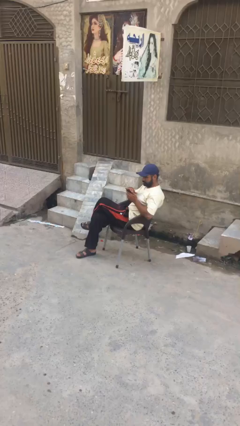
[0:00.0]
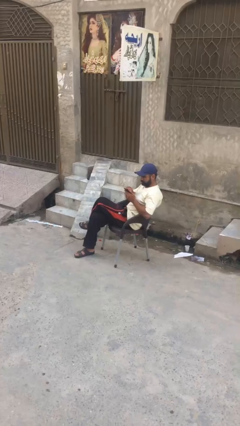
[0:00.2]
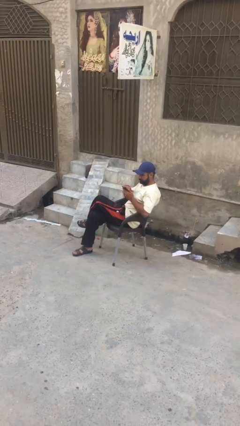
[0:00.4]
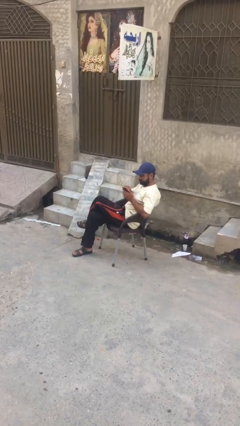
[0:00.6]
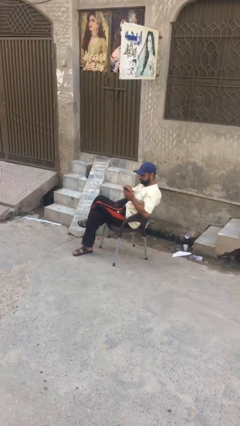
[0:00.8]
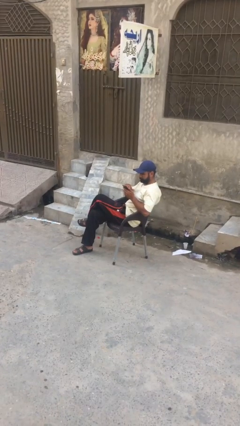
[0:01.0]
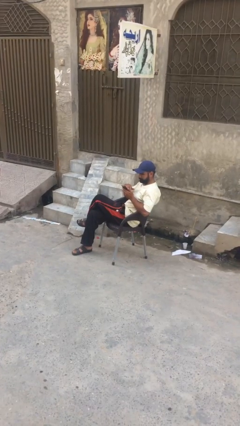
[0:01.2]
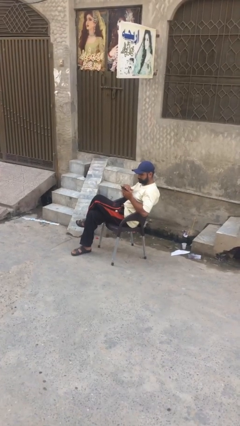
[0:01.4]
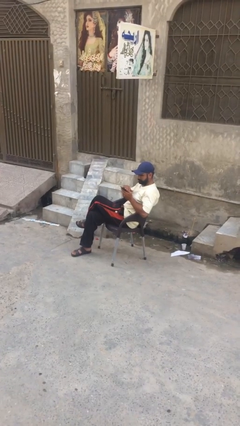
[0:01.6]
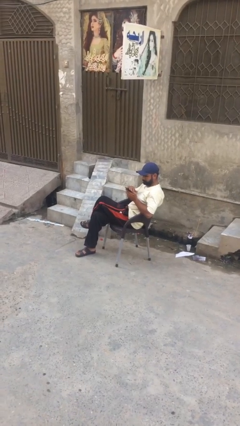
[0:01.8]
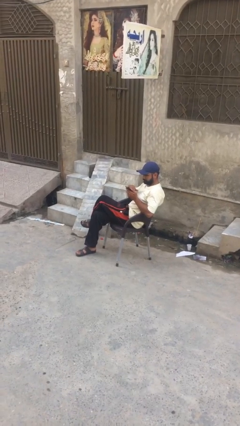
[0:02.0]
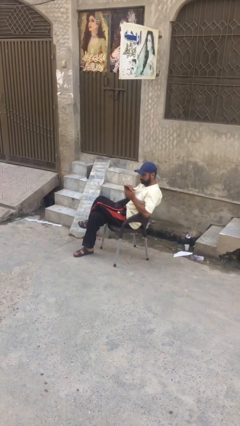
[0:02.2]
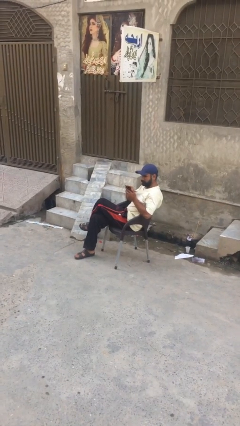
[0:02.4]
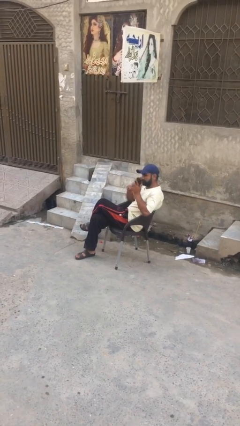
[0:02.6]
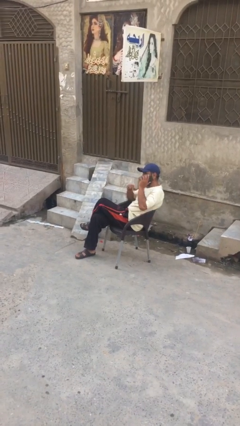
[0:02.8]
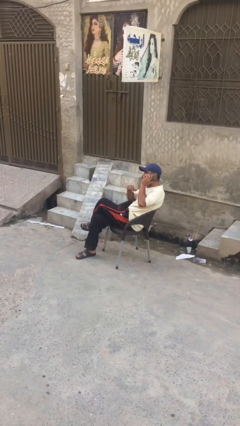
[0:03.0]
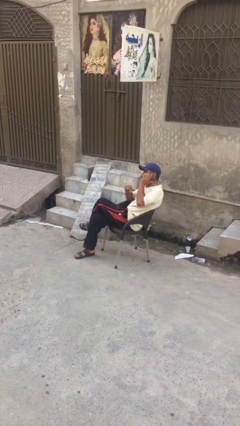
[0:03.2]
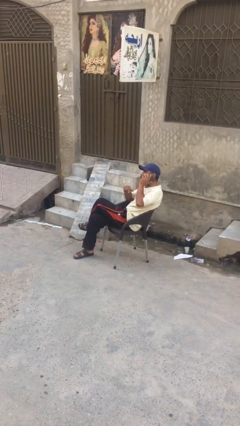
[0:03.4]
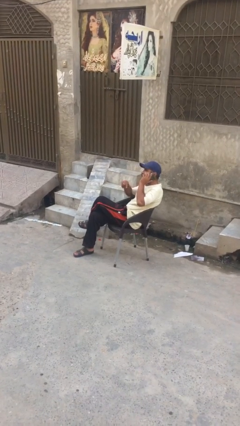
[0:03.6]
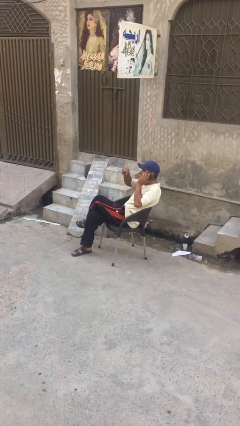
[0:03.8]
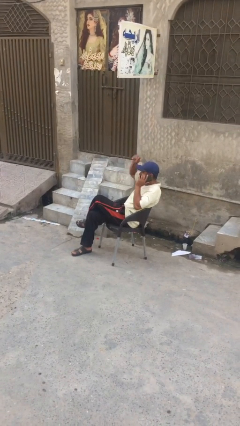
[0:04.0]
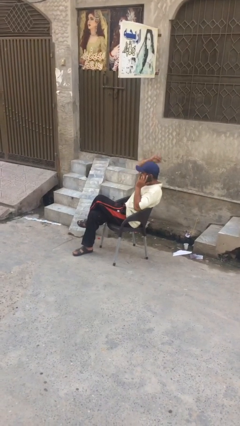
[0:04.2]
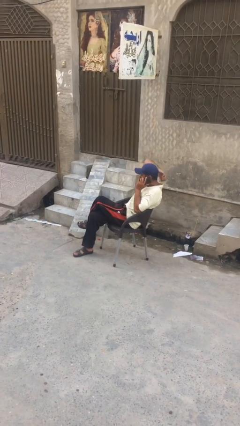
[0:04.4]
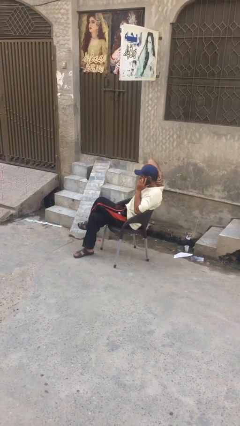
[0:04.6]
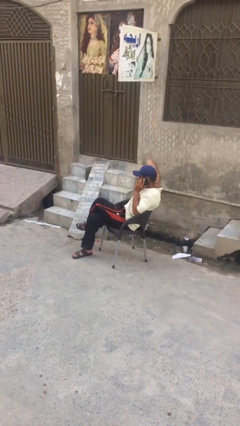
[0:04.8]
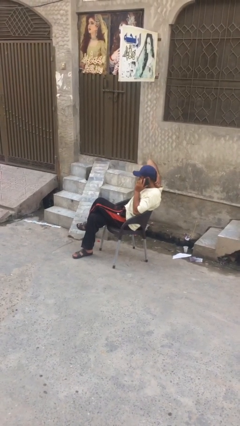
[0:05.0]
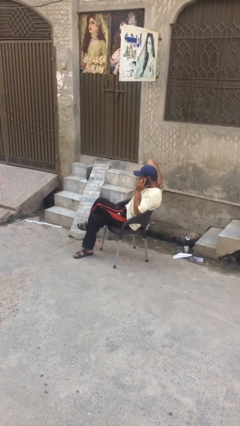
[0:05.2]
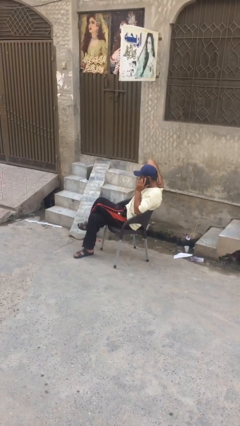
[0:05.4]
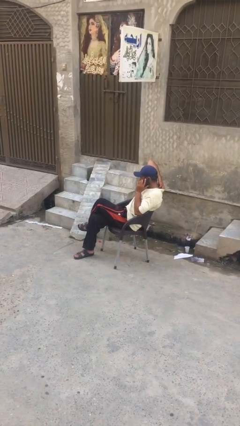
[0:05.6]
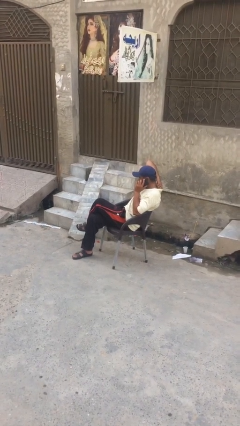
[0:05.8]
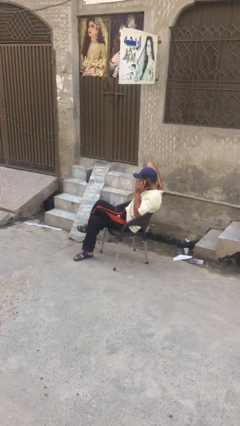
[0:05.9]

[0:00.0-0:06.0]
person talks on phone

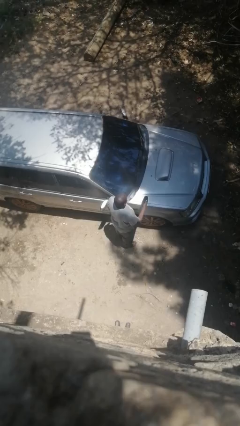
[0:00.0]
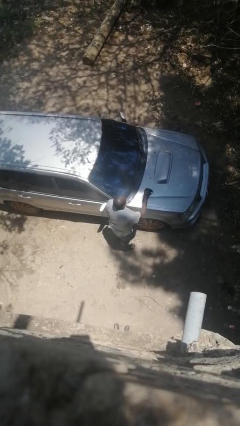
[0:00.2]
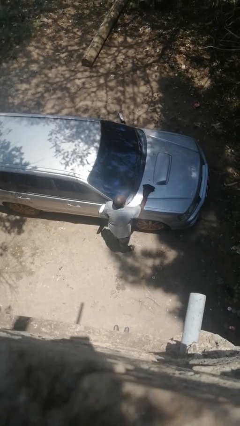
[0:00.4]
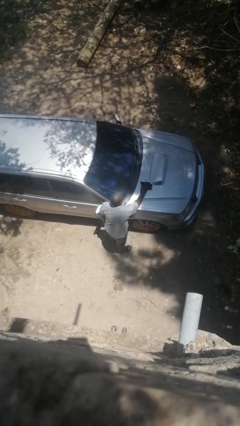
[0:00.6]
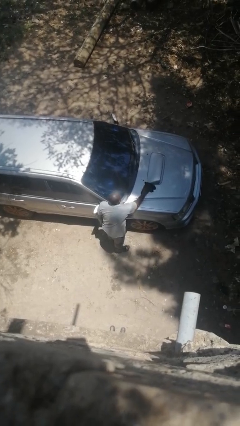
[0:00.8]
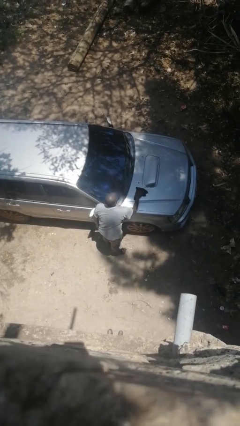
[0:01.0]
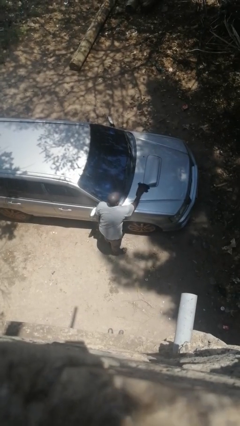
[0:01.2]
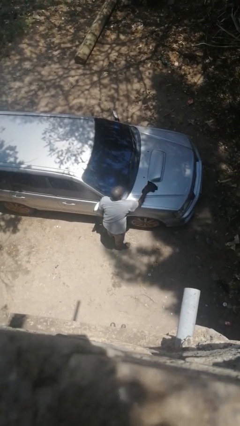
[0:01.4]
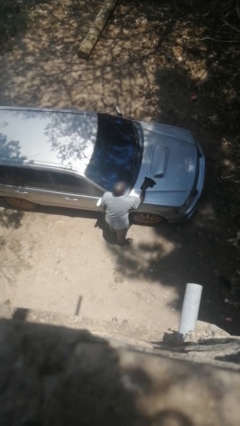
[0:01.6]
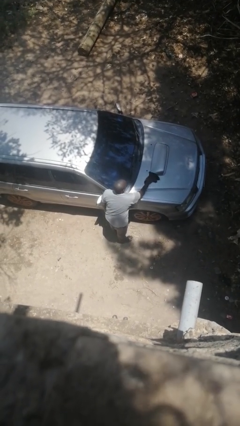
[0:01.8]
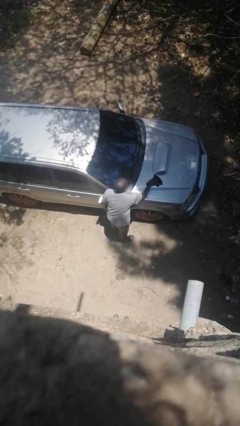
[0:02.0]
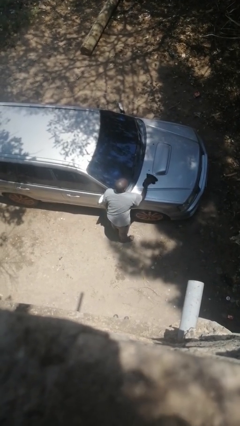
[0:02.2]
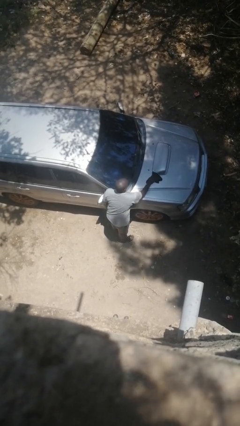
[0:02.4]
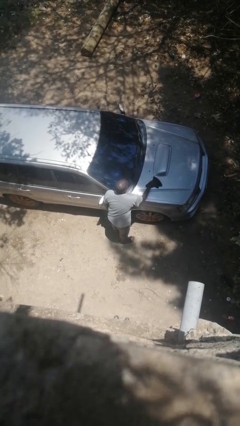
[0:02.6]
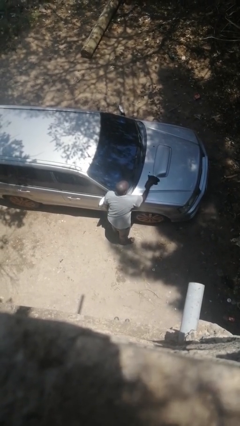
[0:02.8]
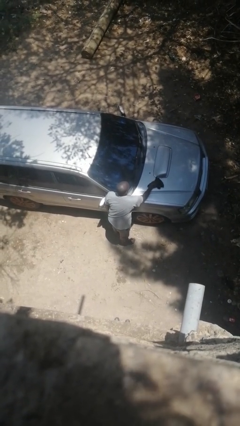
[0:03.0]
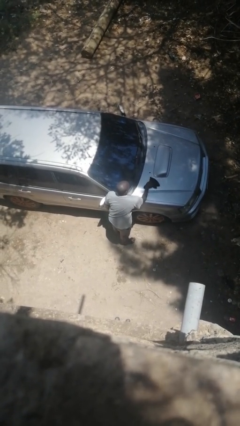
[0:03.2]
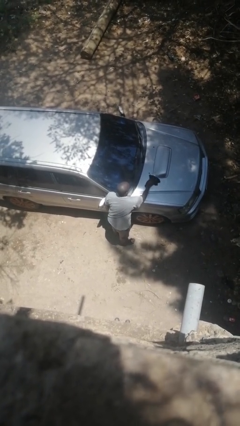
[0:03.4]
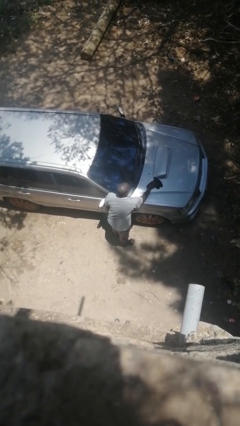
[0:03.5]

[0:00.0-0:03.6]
person polishes car with rag

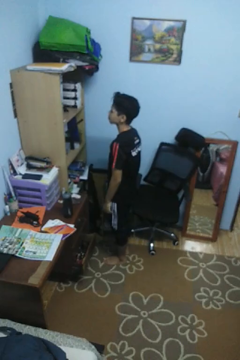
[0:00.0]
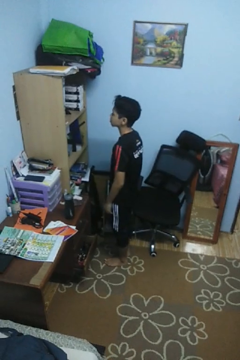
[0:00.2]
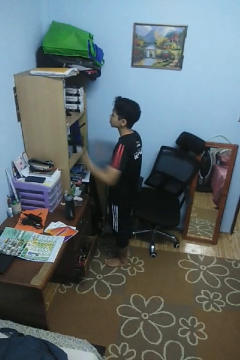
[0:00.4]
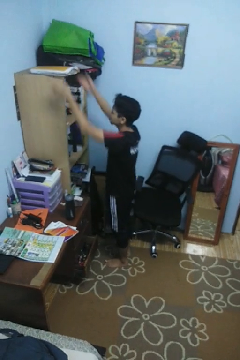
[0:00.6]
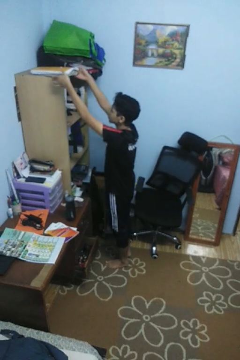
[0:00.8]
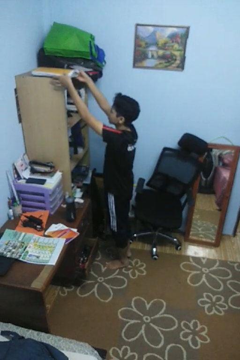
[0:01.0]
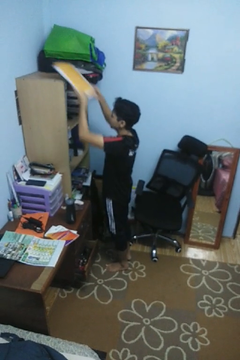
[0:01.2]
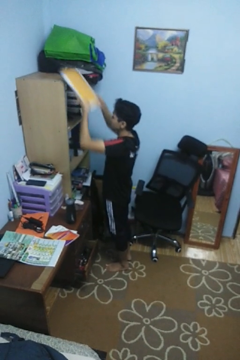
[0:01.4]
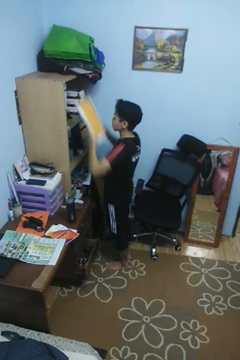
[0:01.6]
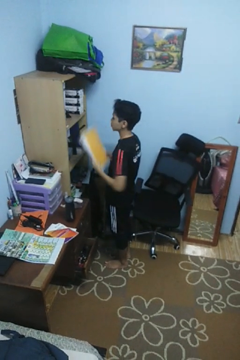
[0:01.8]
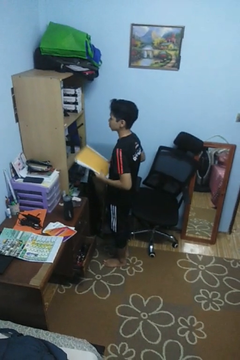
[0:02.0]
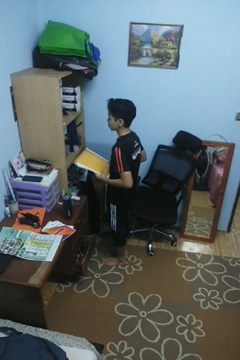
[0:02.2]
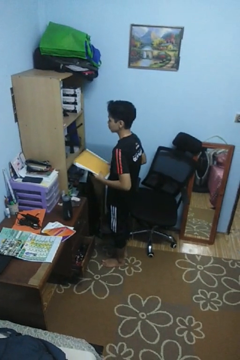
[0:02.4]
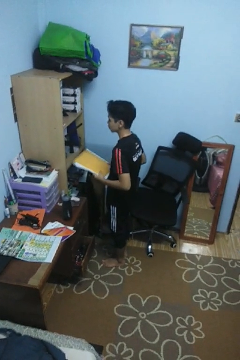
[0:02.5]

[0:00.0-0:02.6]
person picks up object from shelf

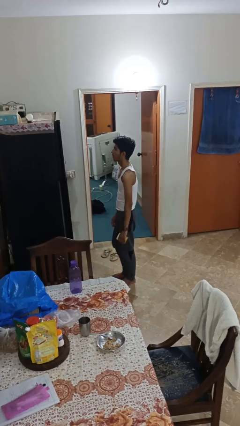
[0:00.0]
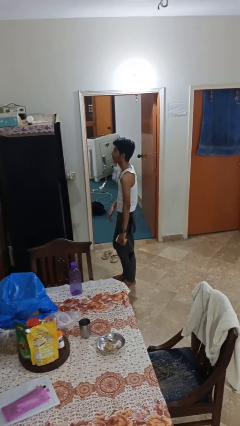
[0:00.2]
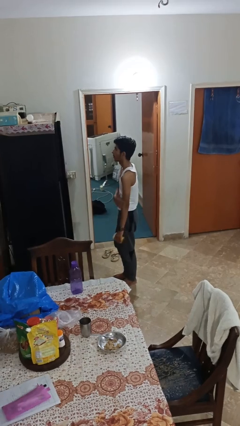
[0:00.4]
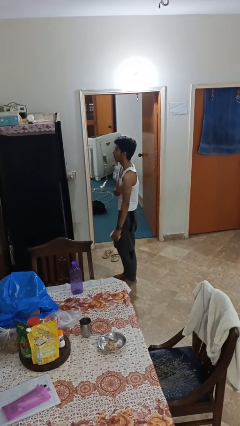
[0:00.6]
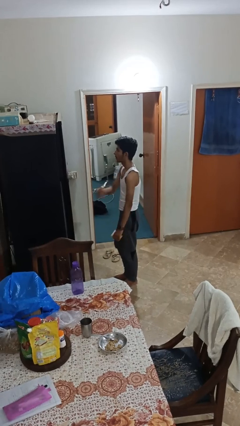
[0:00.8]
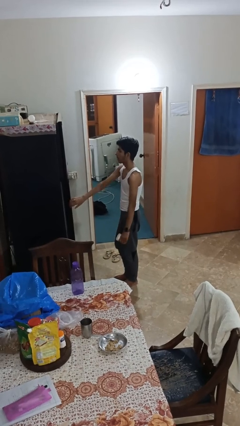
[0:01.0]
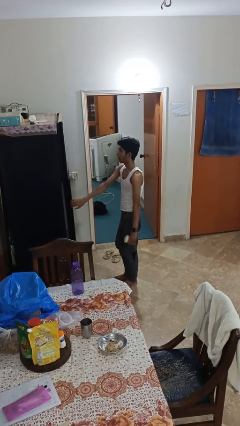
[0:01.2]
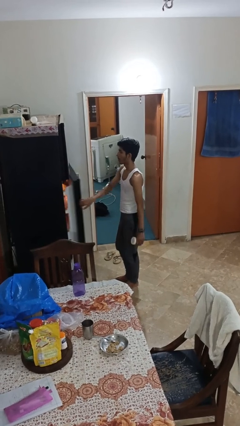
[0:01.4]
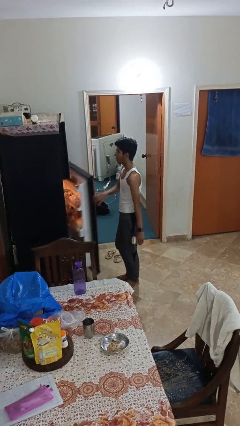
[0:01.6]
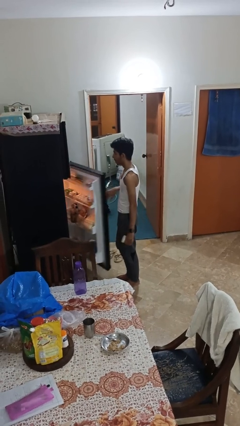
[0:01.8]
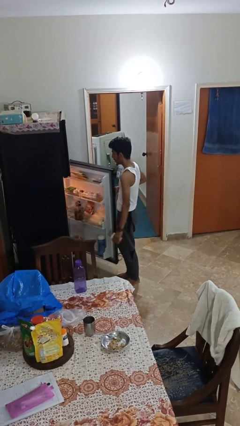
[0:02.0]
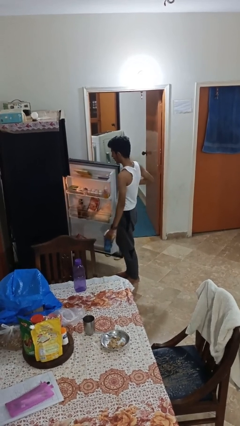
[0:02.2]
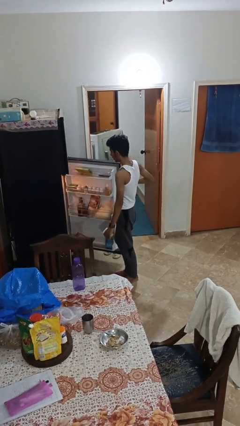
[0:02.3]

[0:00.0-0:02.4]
person opens refrigerator

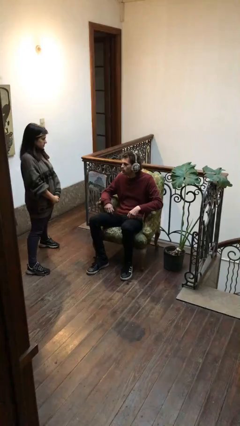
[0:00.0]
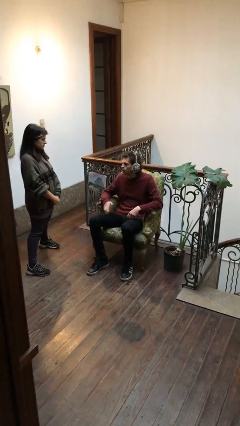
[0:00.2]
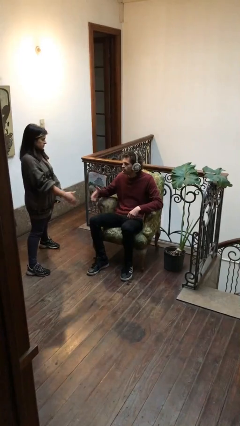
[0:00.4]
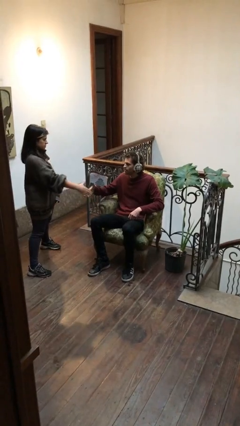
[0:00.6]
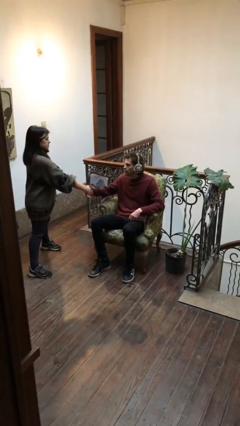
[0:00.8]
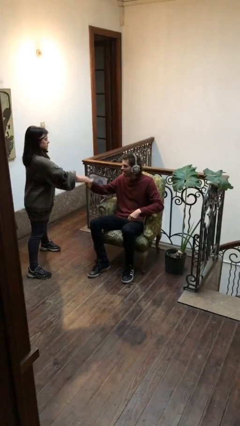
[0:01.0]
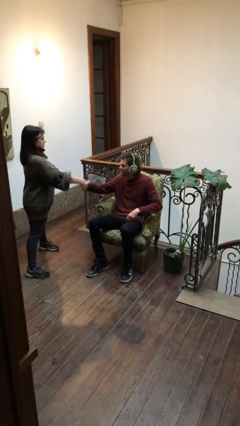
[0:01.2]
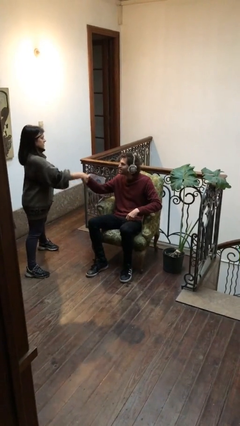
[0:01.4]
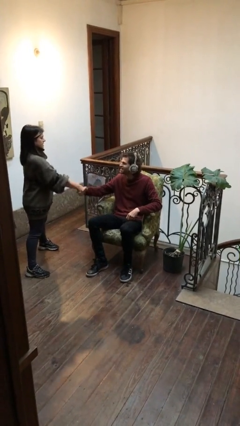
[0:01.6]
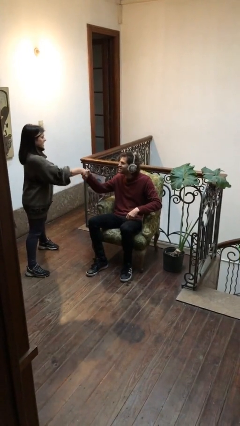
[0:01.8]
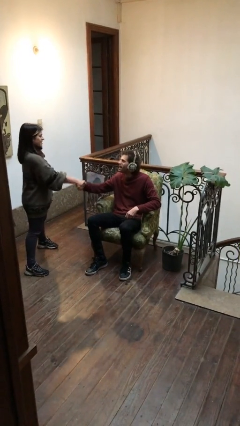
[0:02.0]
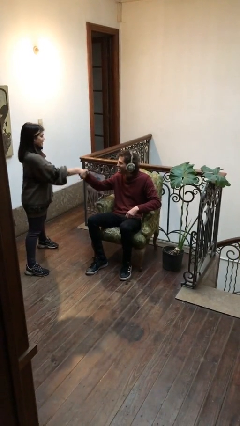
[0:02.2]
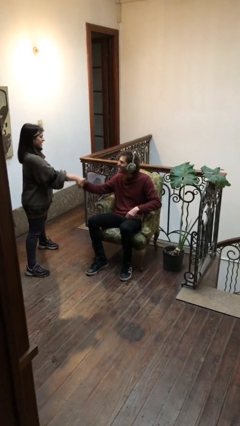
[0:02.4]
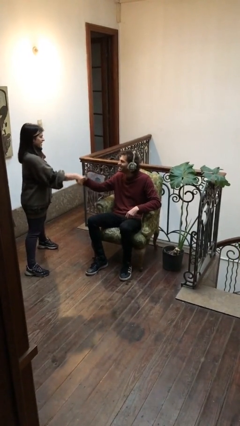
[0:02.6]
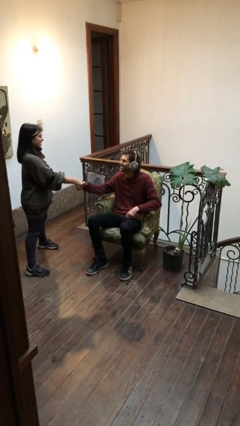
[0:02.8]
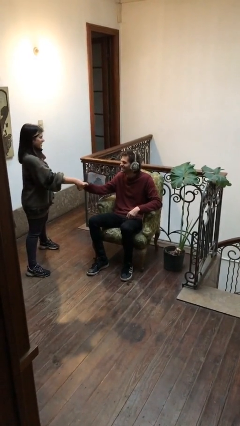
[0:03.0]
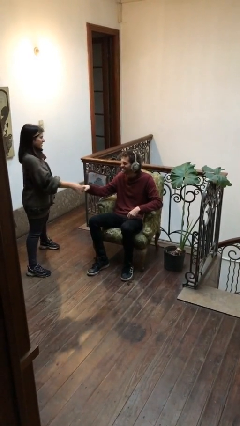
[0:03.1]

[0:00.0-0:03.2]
person shakes hand

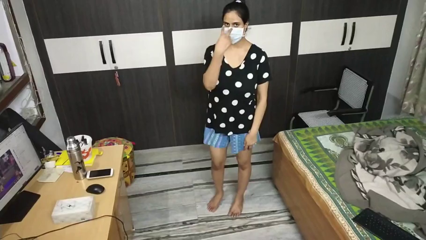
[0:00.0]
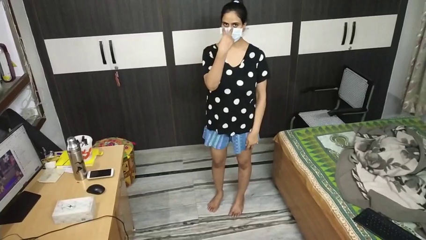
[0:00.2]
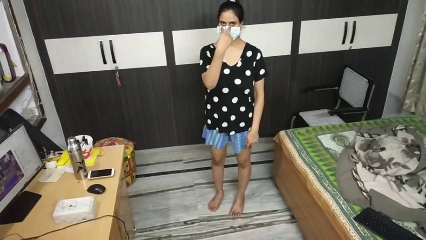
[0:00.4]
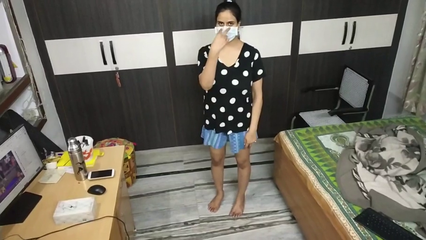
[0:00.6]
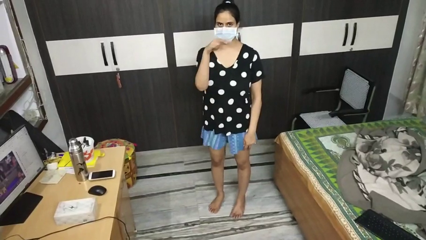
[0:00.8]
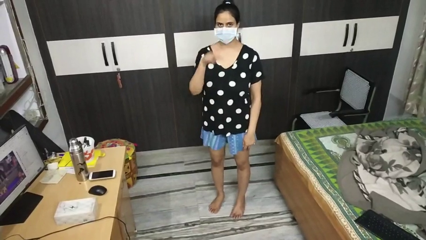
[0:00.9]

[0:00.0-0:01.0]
person gestures watch closely
